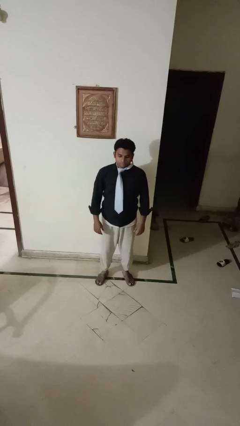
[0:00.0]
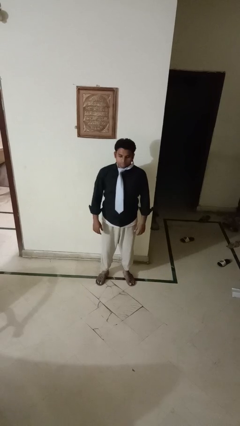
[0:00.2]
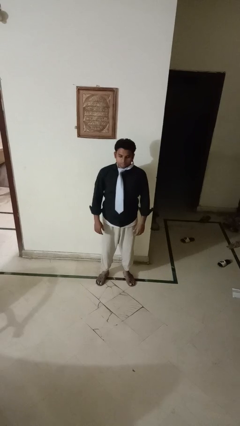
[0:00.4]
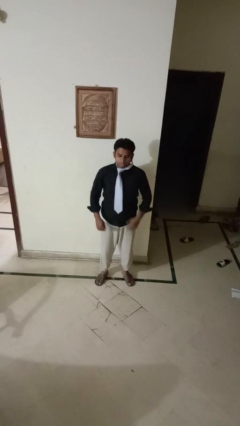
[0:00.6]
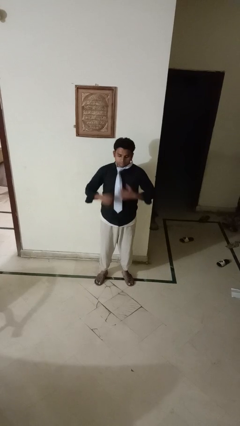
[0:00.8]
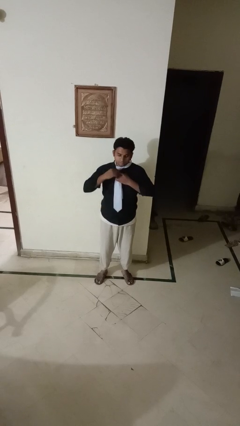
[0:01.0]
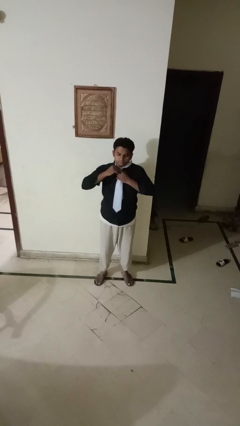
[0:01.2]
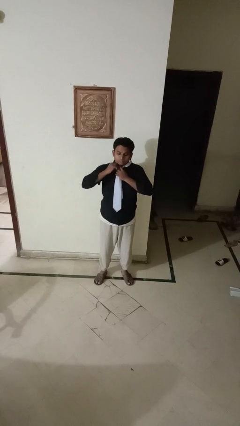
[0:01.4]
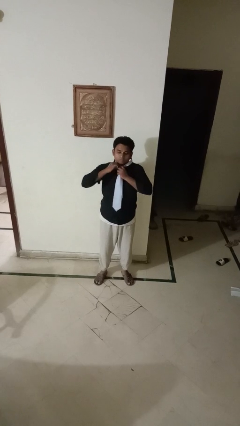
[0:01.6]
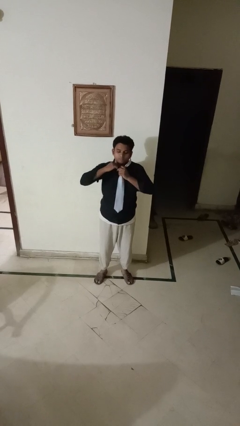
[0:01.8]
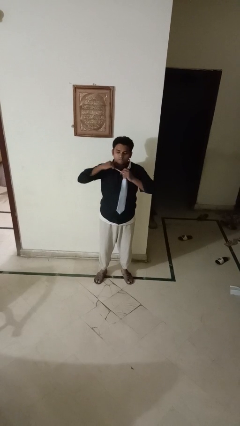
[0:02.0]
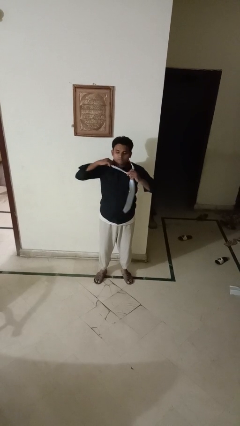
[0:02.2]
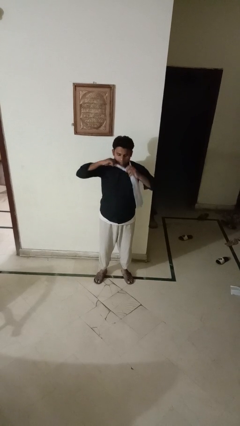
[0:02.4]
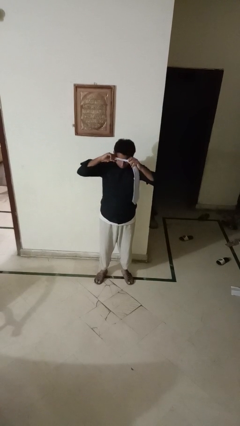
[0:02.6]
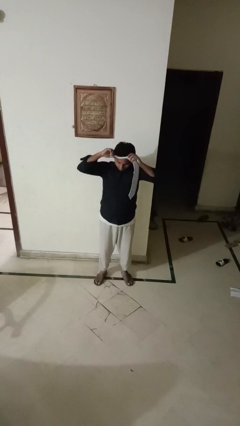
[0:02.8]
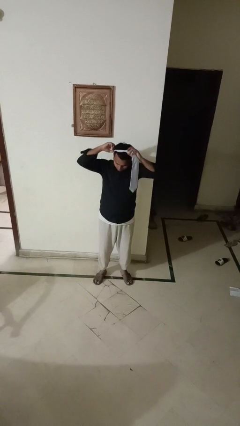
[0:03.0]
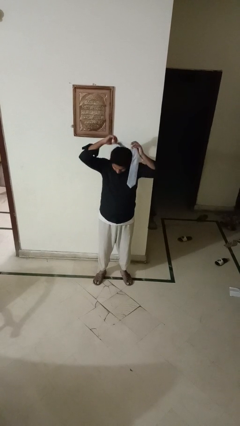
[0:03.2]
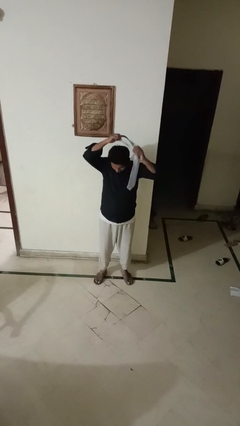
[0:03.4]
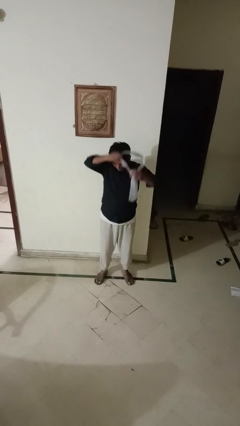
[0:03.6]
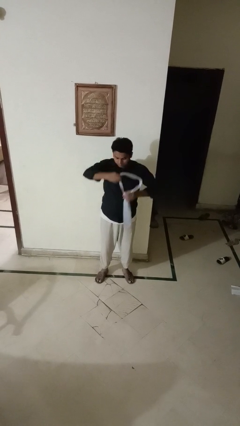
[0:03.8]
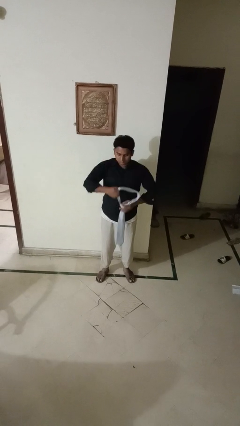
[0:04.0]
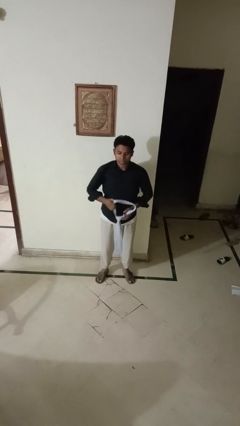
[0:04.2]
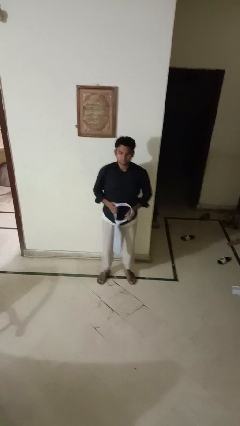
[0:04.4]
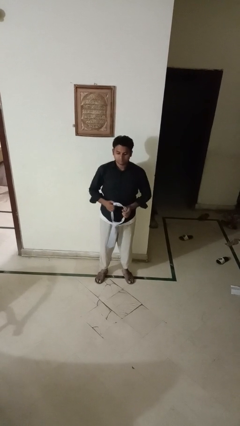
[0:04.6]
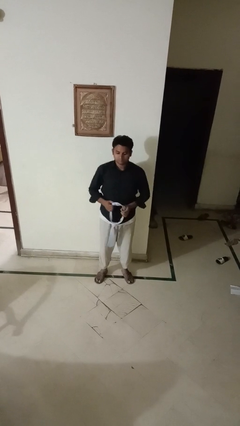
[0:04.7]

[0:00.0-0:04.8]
person takes off necktie

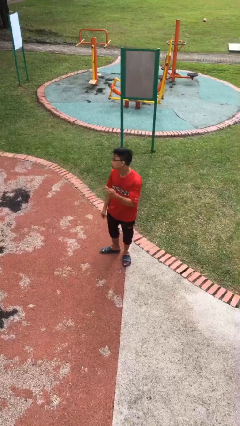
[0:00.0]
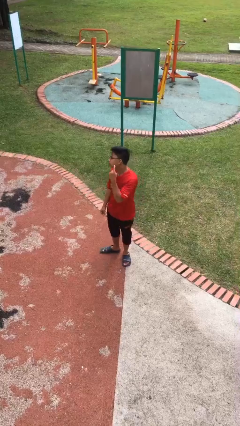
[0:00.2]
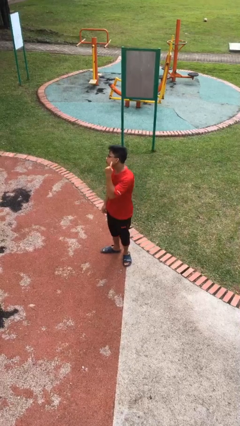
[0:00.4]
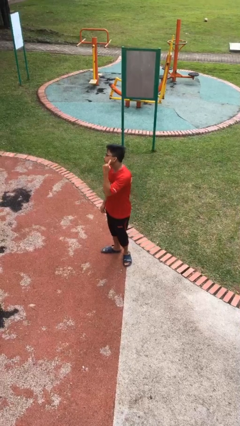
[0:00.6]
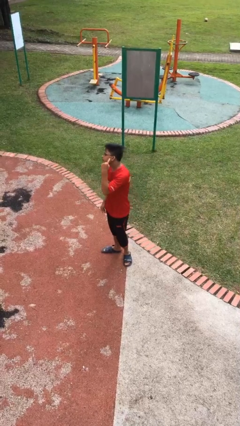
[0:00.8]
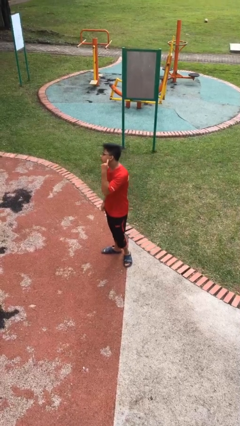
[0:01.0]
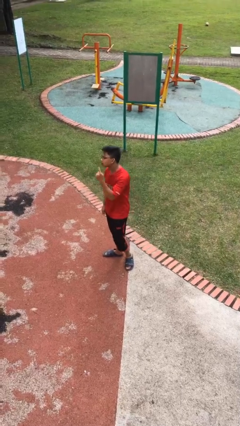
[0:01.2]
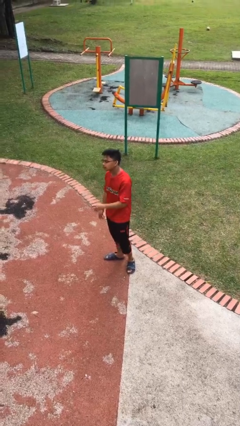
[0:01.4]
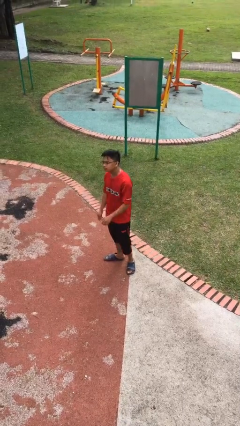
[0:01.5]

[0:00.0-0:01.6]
person gestures listen closely

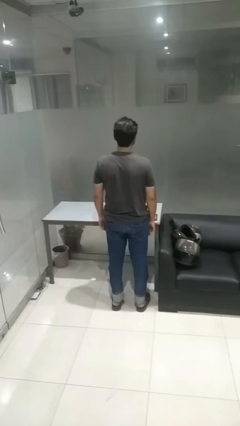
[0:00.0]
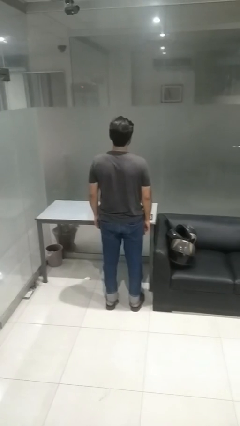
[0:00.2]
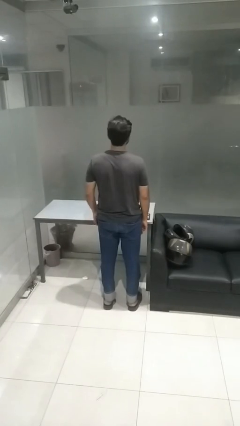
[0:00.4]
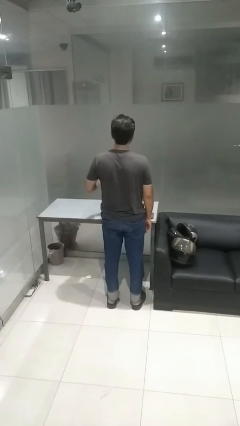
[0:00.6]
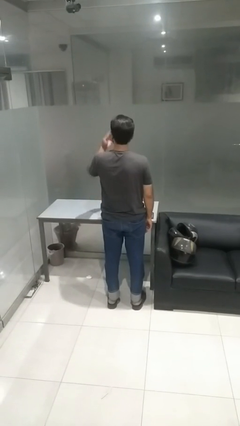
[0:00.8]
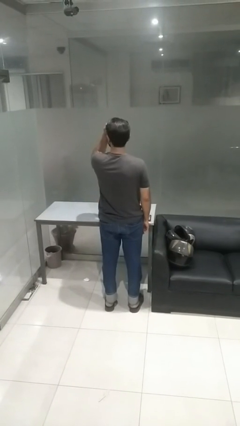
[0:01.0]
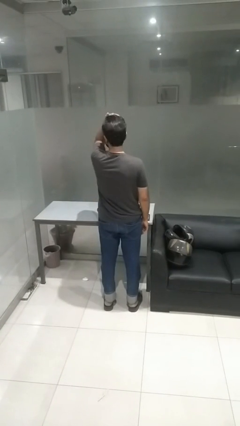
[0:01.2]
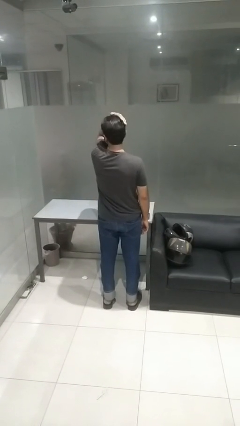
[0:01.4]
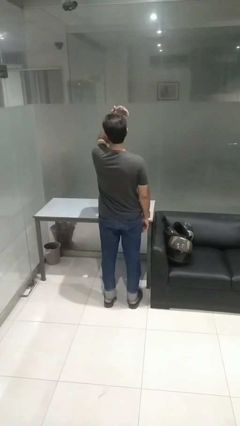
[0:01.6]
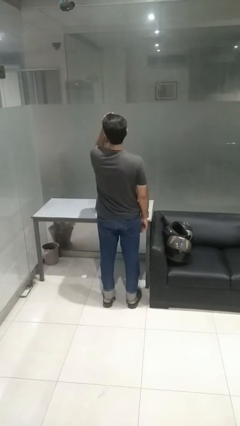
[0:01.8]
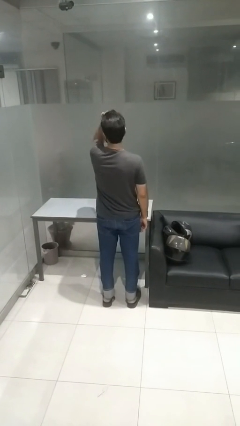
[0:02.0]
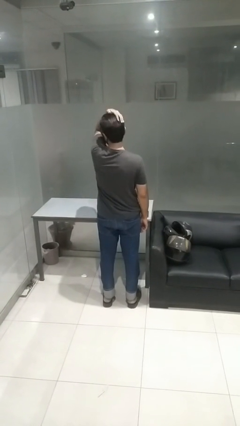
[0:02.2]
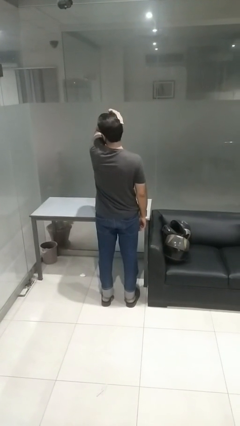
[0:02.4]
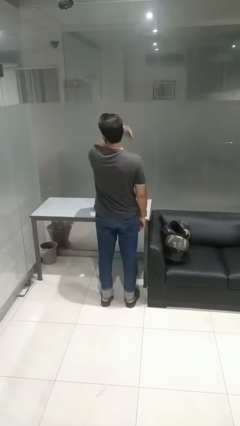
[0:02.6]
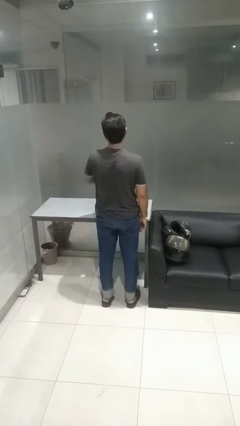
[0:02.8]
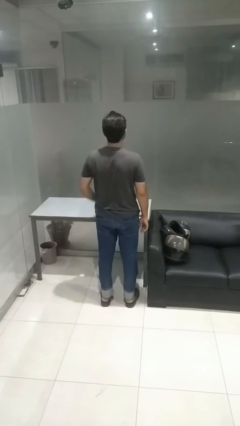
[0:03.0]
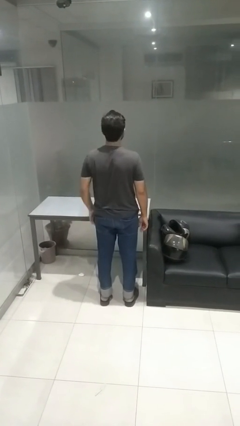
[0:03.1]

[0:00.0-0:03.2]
person strokes hair

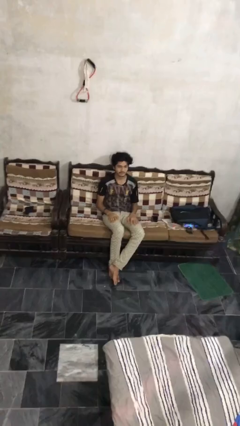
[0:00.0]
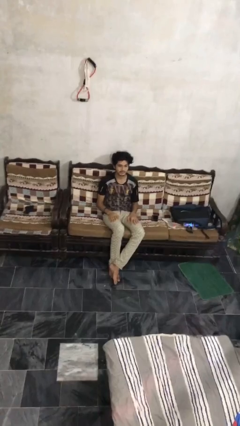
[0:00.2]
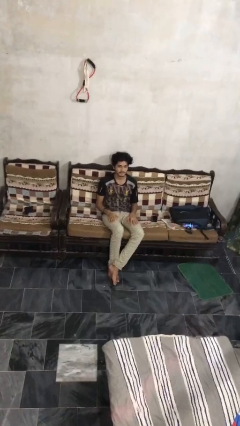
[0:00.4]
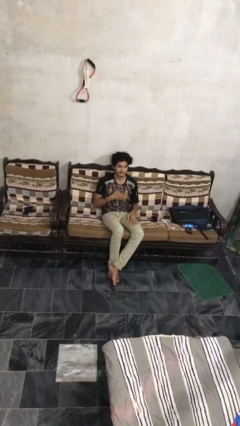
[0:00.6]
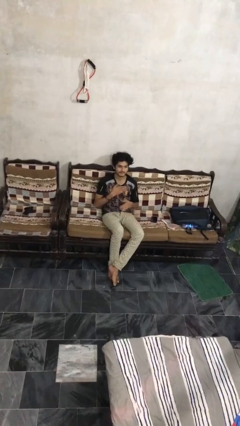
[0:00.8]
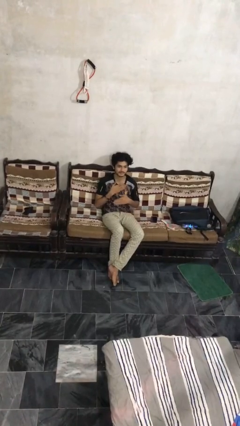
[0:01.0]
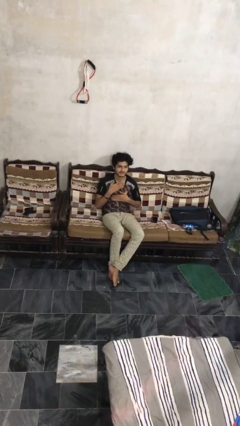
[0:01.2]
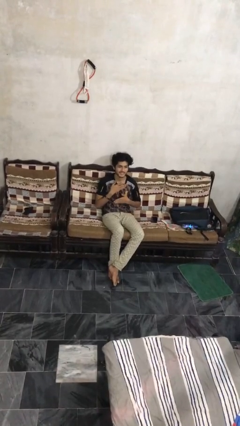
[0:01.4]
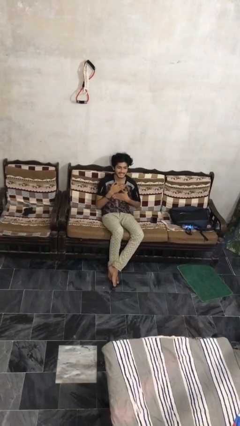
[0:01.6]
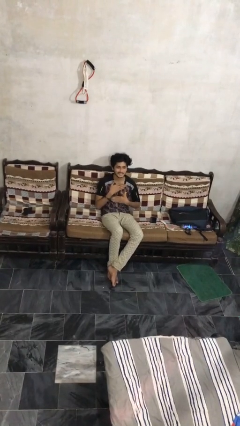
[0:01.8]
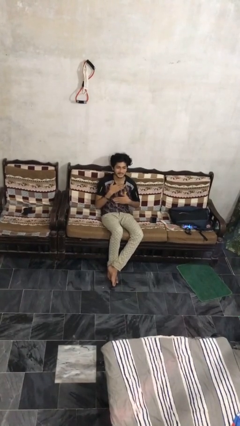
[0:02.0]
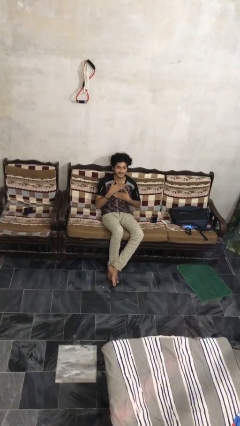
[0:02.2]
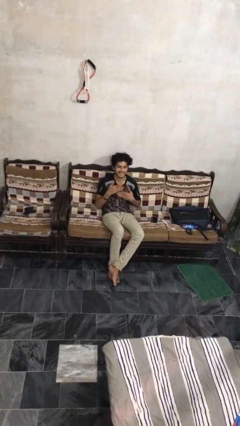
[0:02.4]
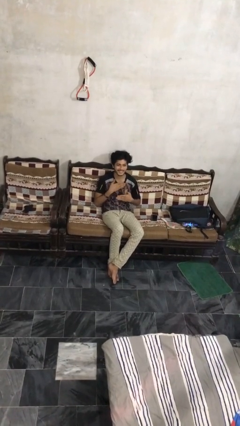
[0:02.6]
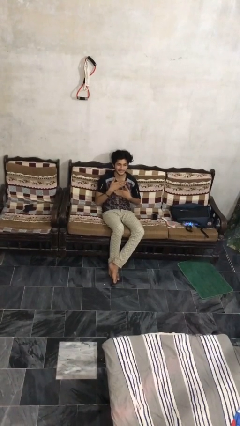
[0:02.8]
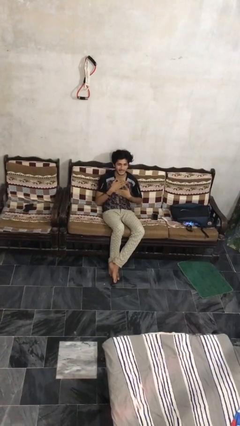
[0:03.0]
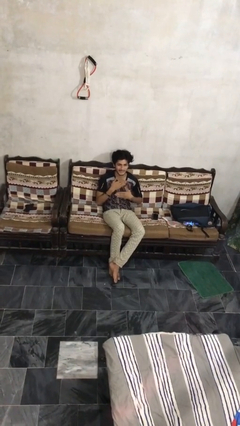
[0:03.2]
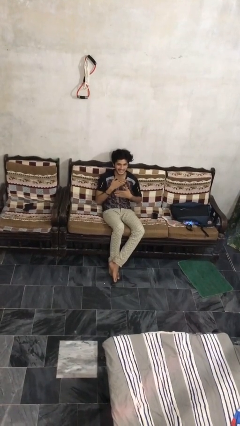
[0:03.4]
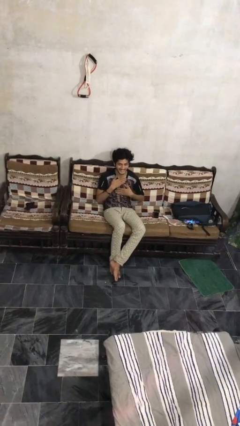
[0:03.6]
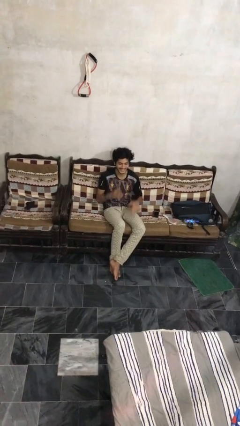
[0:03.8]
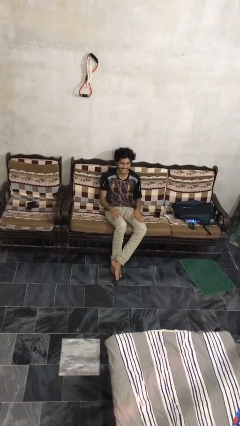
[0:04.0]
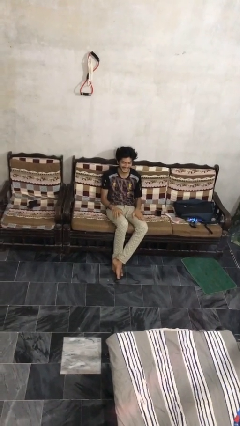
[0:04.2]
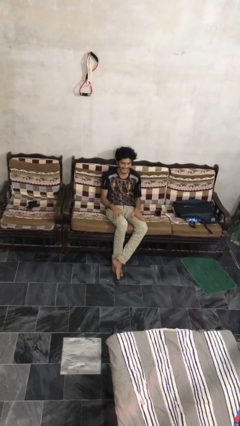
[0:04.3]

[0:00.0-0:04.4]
person drums on chest

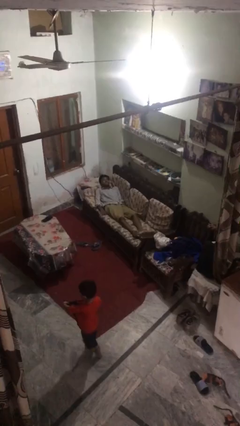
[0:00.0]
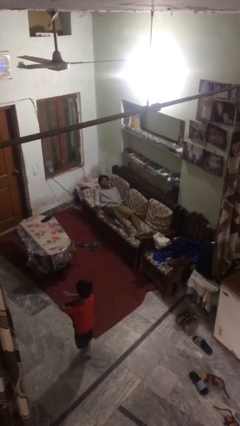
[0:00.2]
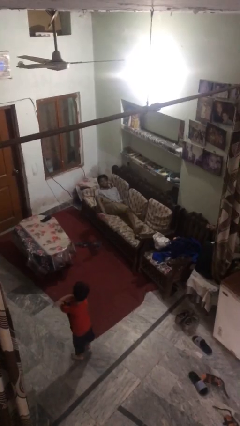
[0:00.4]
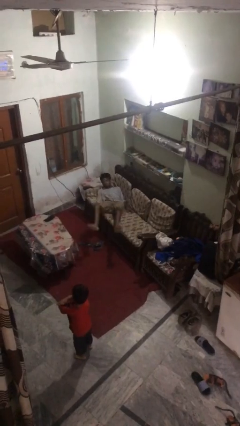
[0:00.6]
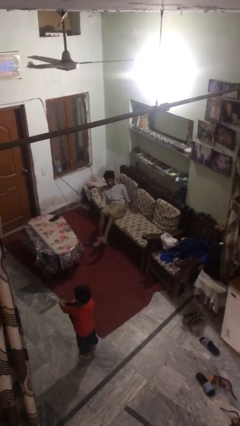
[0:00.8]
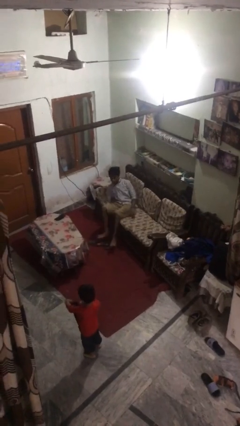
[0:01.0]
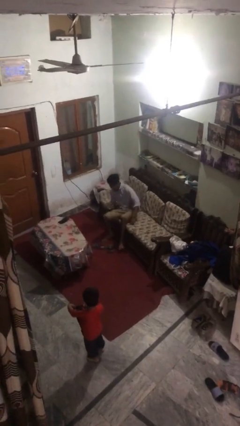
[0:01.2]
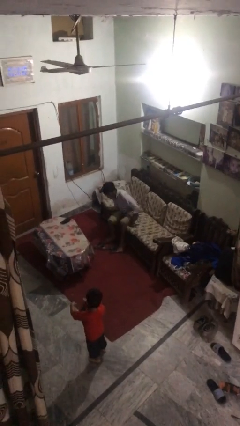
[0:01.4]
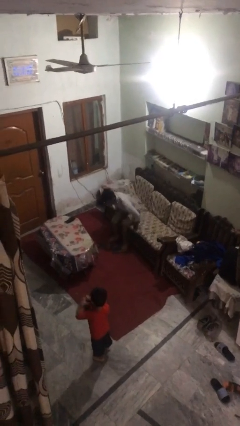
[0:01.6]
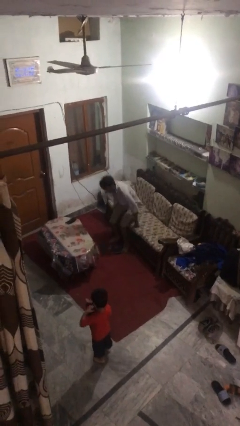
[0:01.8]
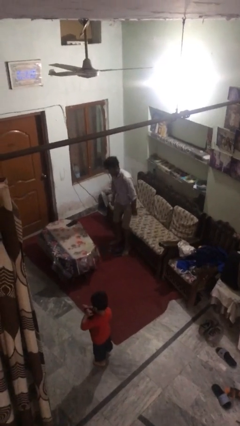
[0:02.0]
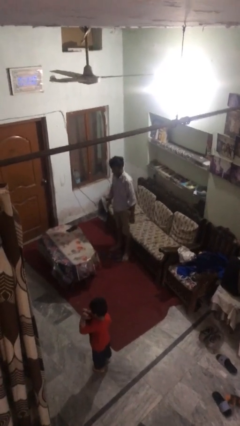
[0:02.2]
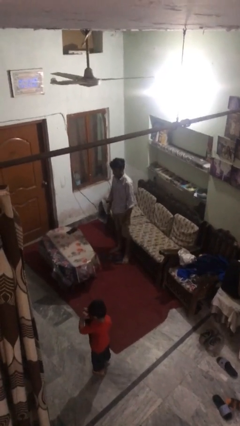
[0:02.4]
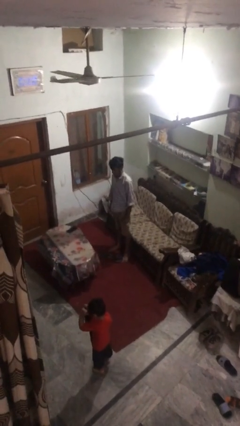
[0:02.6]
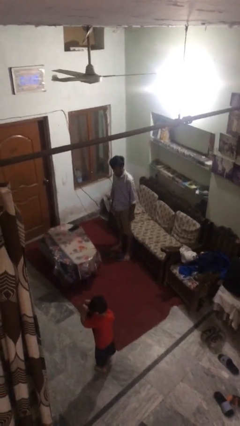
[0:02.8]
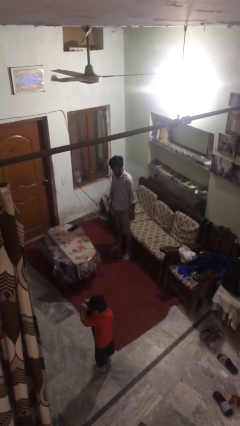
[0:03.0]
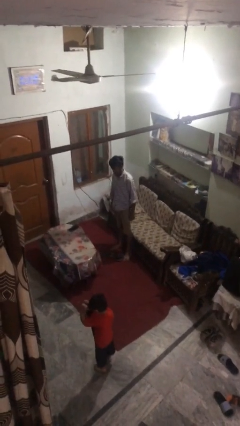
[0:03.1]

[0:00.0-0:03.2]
person stands up
